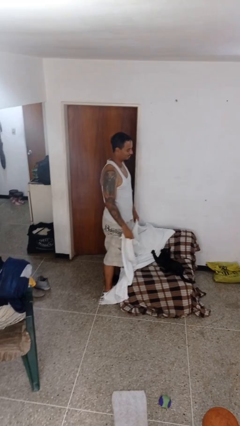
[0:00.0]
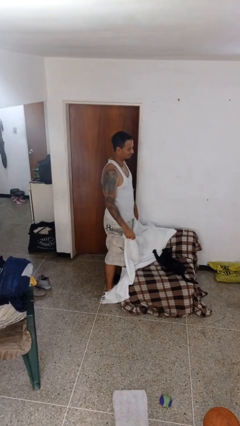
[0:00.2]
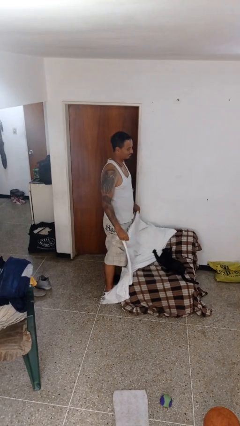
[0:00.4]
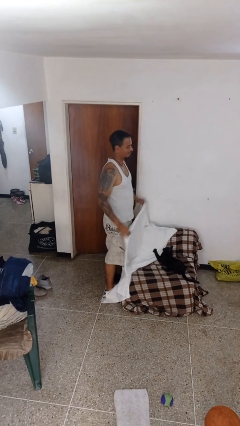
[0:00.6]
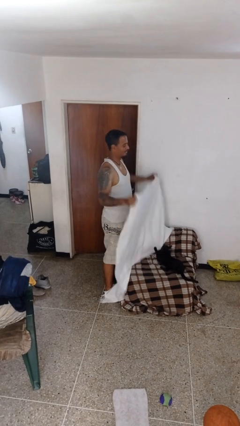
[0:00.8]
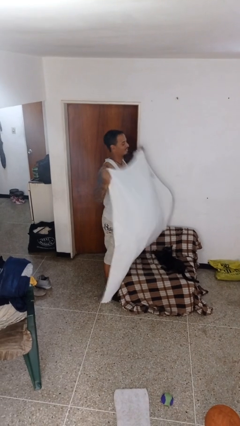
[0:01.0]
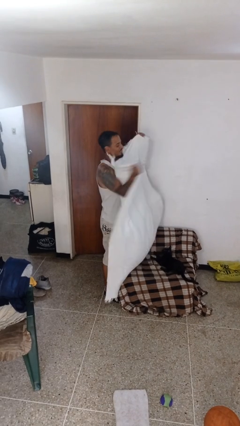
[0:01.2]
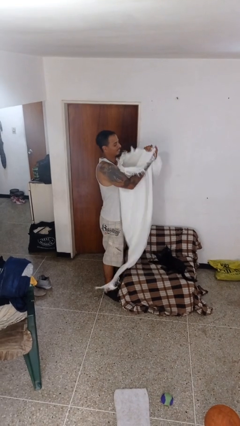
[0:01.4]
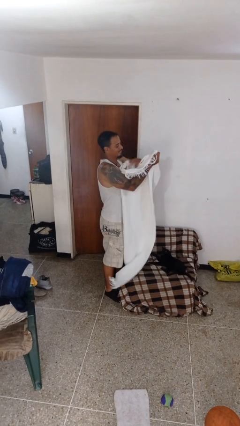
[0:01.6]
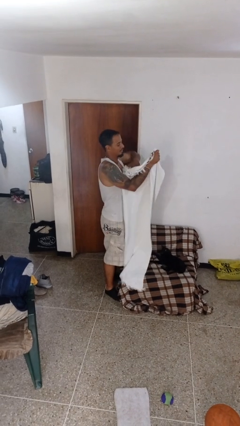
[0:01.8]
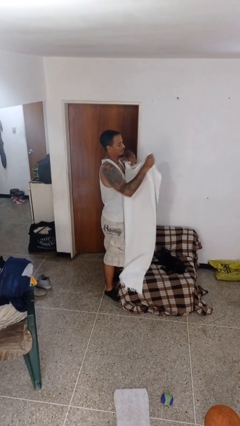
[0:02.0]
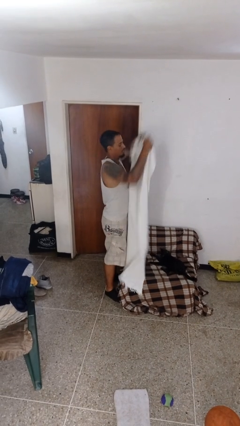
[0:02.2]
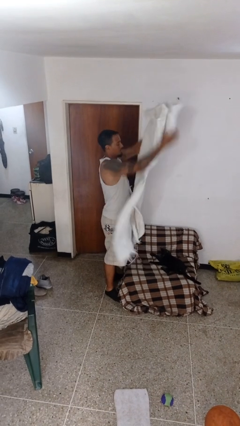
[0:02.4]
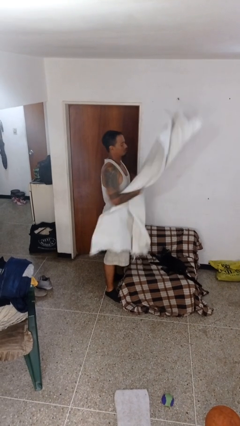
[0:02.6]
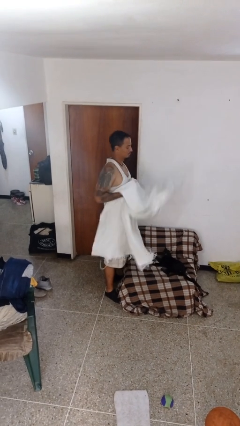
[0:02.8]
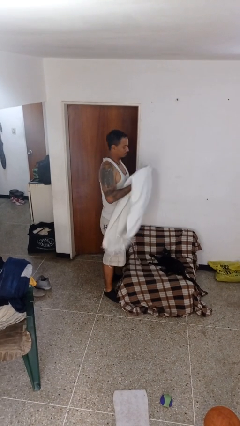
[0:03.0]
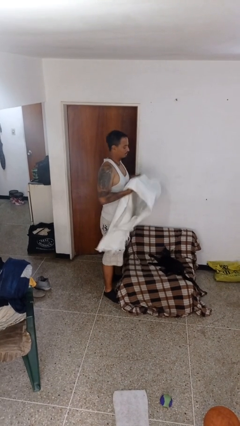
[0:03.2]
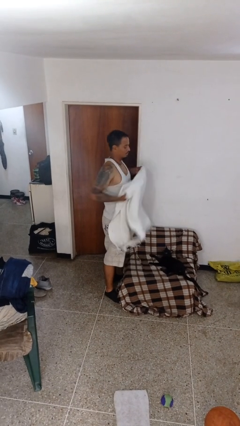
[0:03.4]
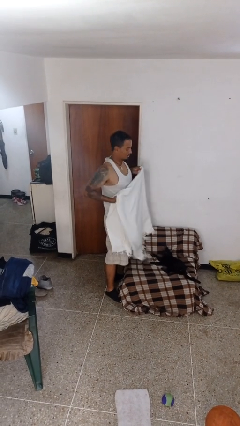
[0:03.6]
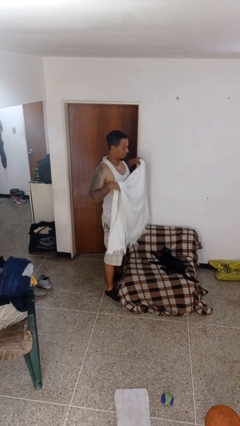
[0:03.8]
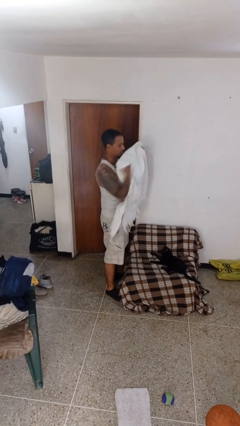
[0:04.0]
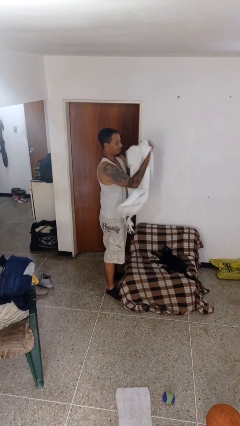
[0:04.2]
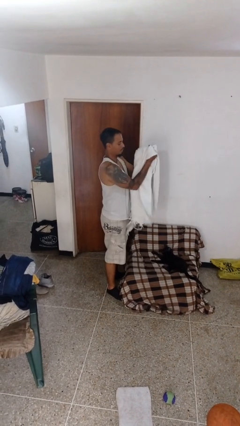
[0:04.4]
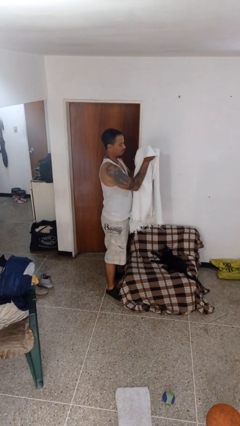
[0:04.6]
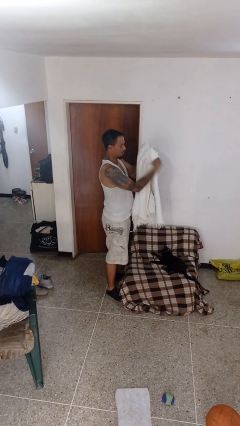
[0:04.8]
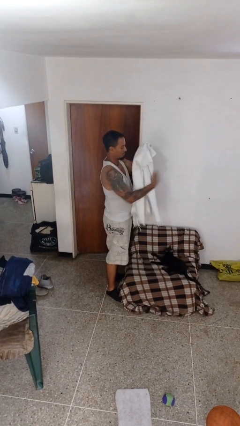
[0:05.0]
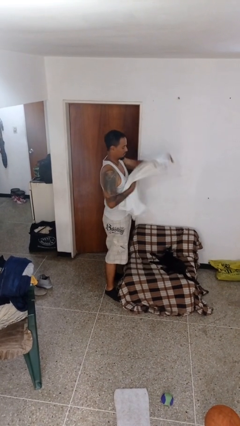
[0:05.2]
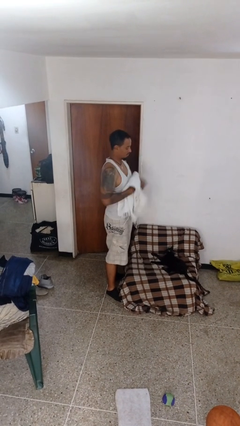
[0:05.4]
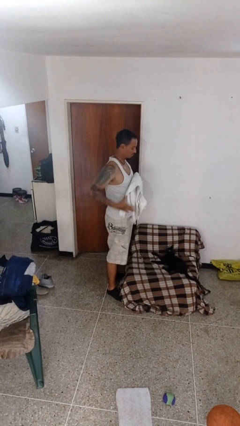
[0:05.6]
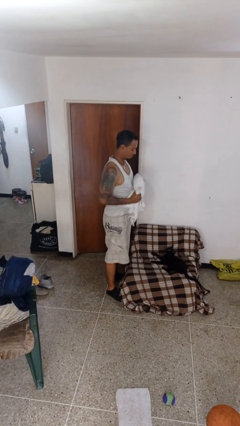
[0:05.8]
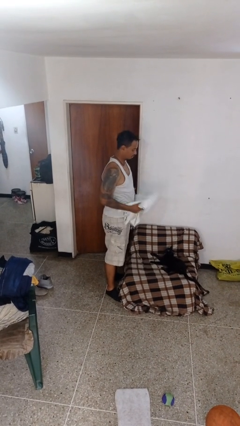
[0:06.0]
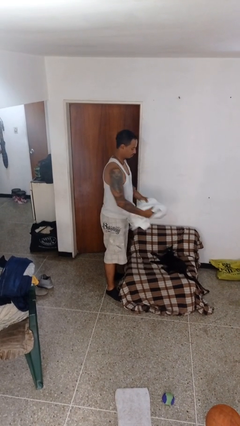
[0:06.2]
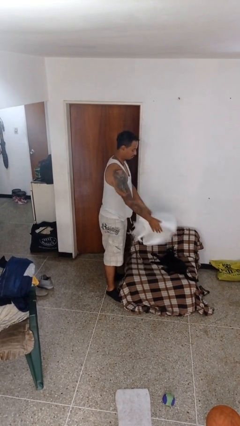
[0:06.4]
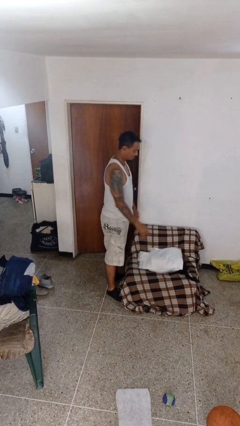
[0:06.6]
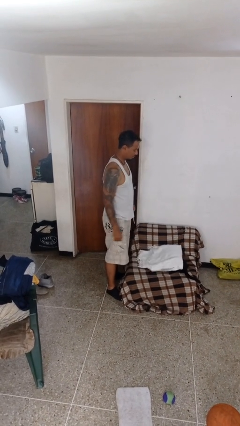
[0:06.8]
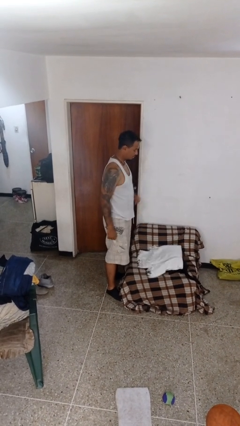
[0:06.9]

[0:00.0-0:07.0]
person folds blanket

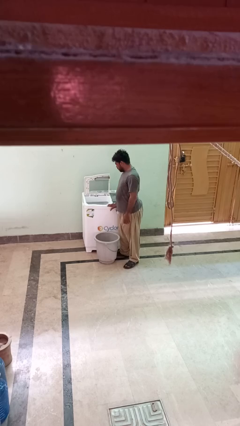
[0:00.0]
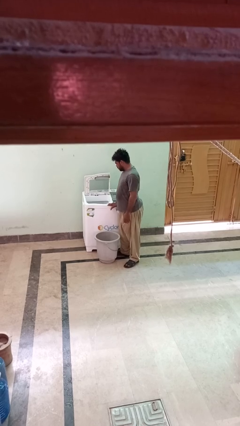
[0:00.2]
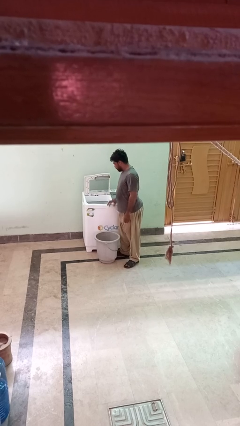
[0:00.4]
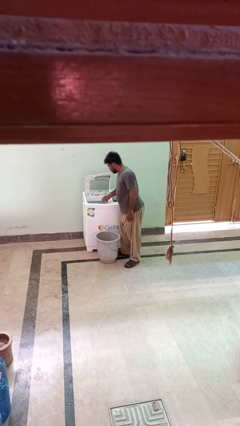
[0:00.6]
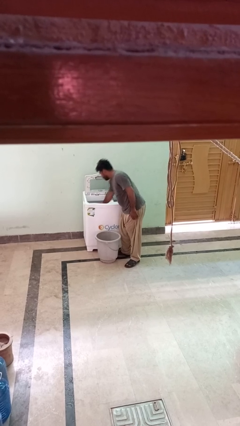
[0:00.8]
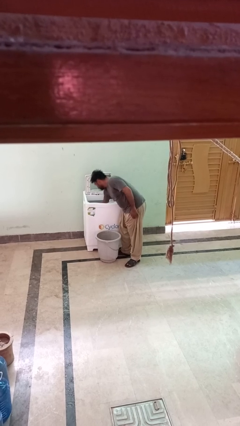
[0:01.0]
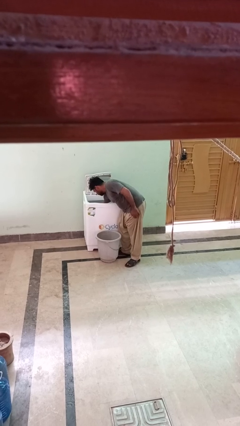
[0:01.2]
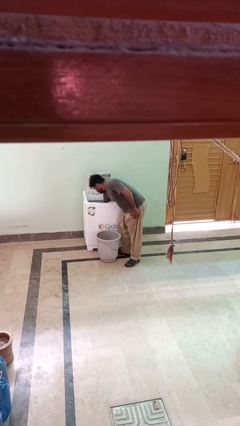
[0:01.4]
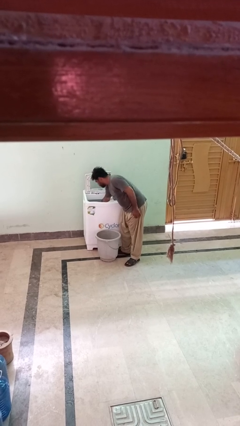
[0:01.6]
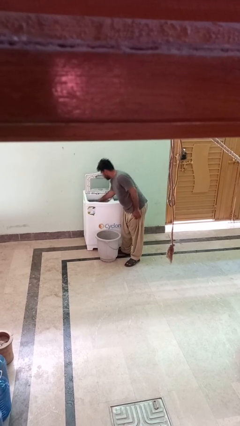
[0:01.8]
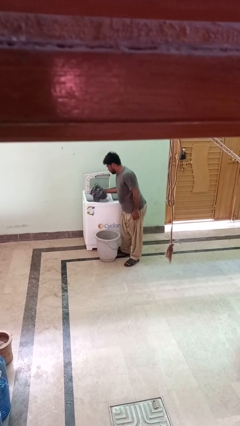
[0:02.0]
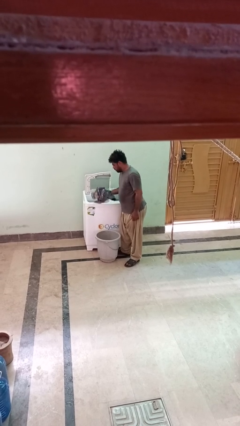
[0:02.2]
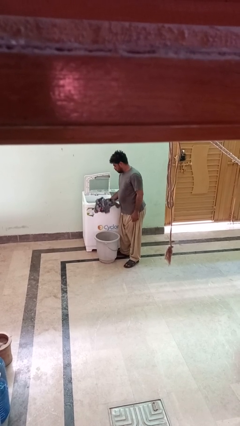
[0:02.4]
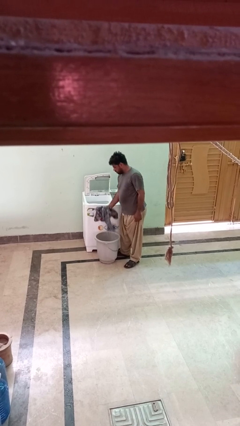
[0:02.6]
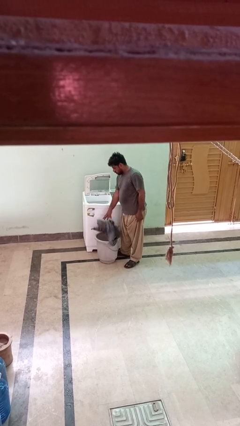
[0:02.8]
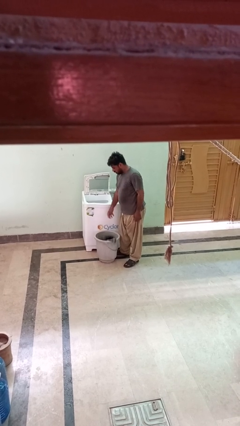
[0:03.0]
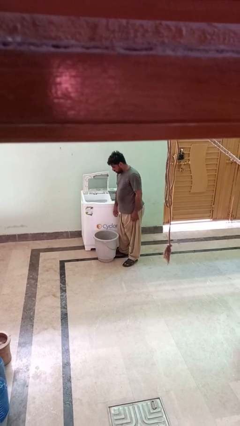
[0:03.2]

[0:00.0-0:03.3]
person loads clotheswasher

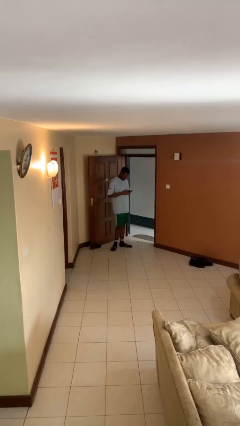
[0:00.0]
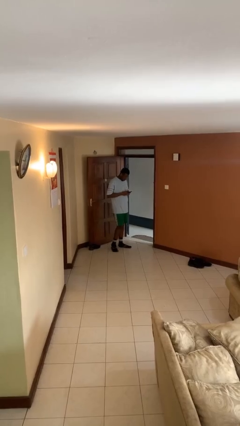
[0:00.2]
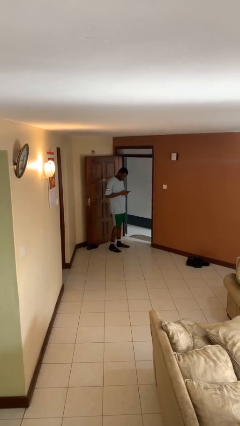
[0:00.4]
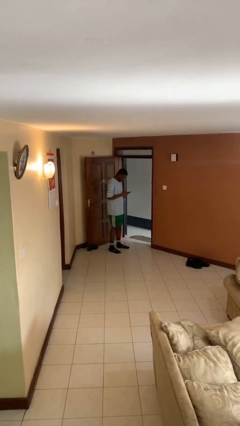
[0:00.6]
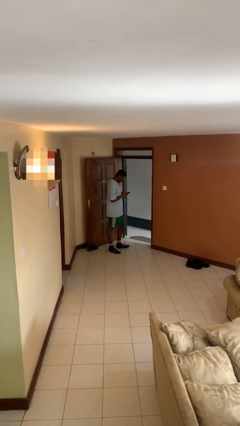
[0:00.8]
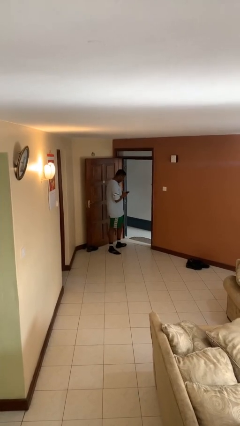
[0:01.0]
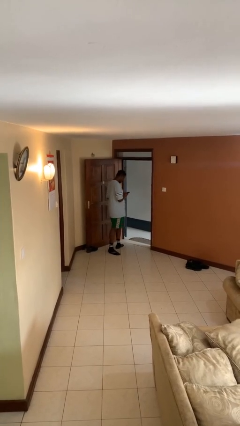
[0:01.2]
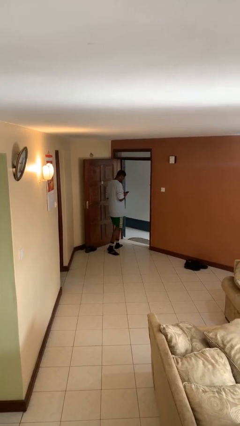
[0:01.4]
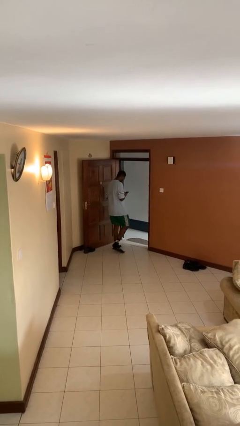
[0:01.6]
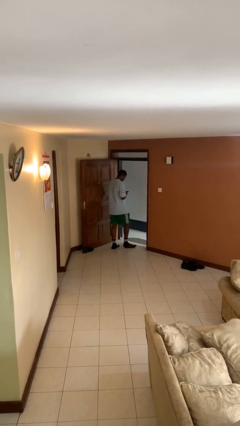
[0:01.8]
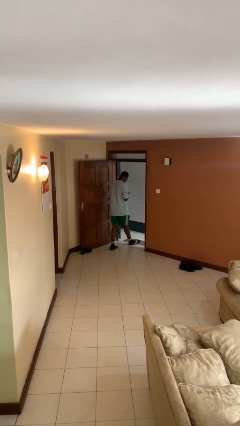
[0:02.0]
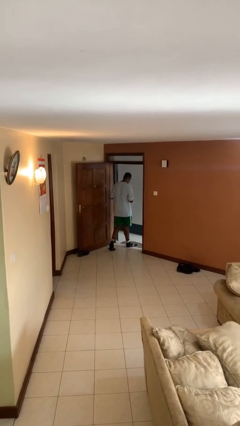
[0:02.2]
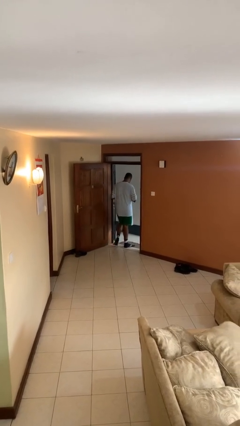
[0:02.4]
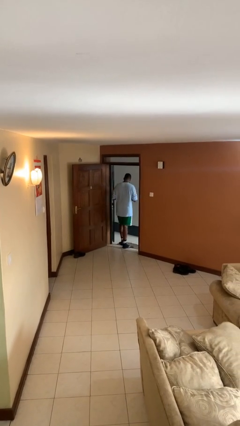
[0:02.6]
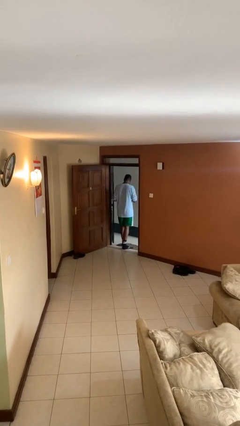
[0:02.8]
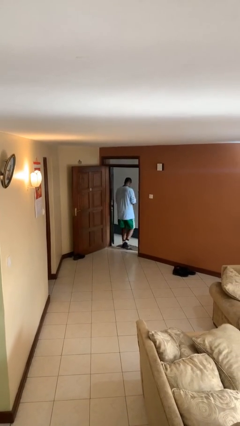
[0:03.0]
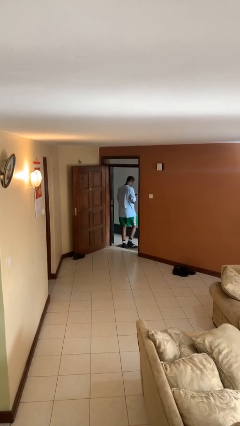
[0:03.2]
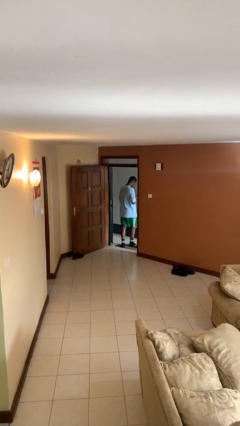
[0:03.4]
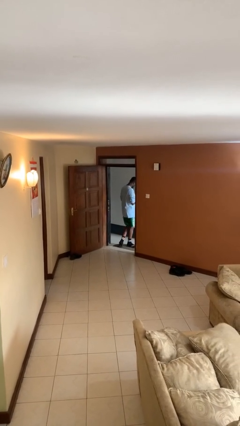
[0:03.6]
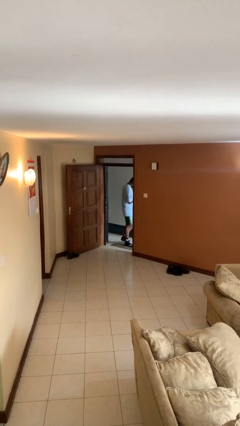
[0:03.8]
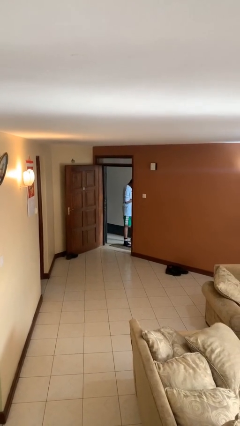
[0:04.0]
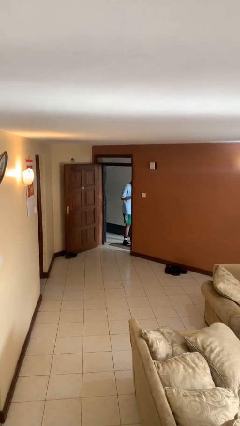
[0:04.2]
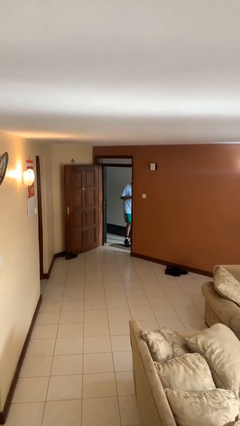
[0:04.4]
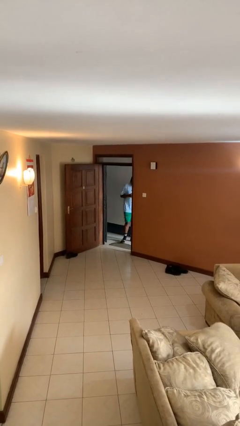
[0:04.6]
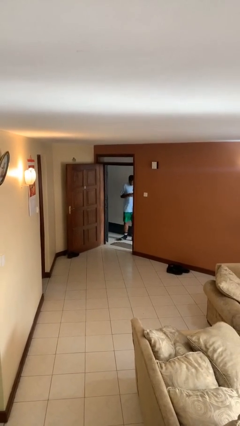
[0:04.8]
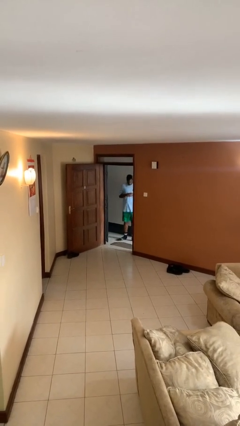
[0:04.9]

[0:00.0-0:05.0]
person exits scene through structure

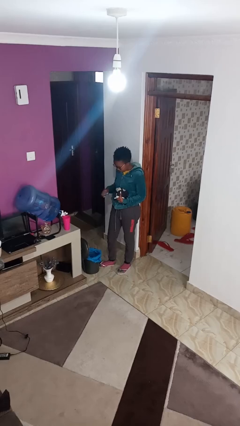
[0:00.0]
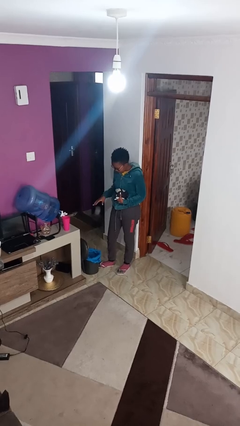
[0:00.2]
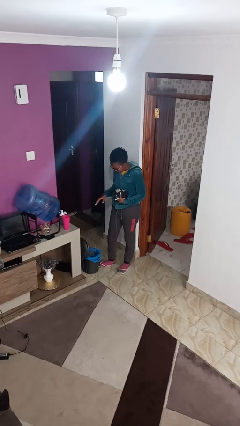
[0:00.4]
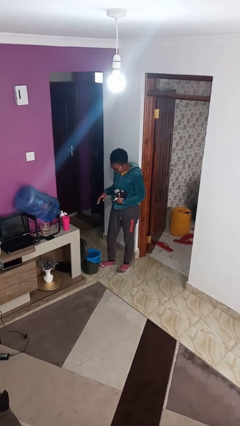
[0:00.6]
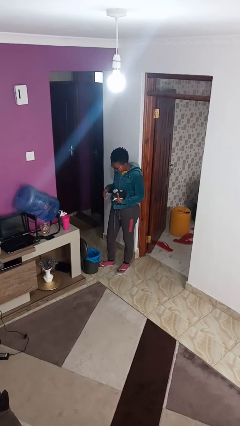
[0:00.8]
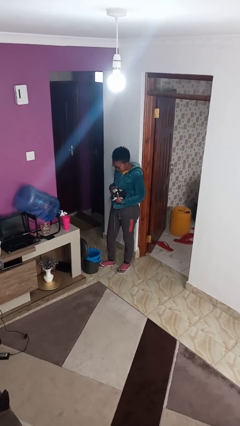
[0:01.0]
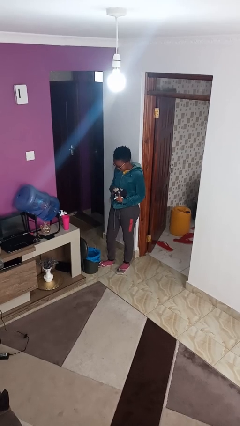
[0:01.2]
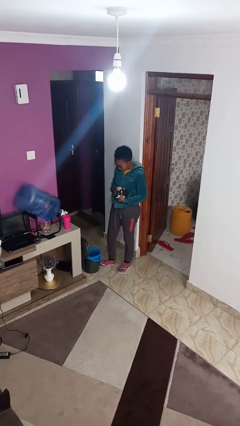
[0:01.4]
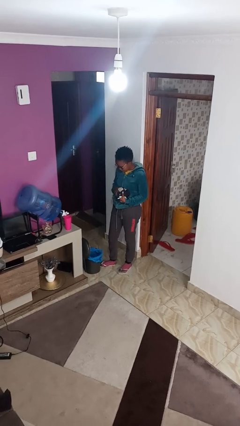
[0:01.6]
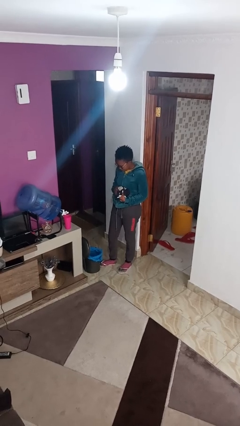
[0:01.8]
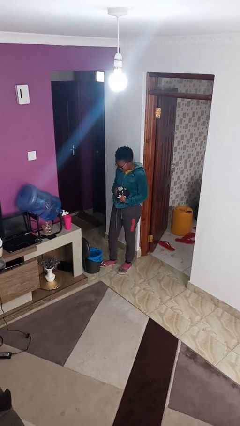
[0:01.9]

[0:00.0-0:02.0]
person discards trash

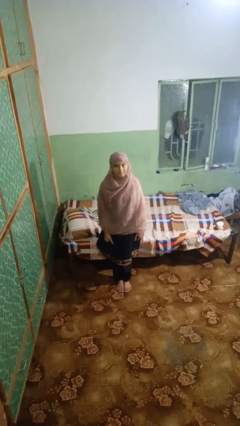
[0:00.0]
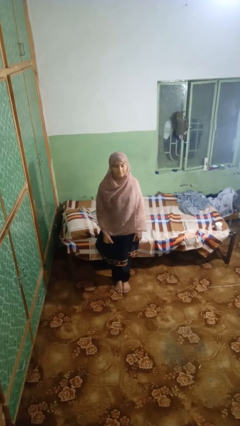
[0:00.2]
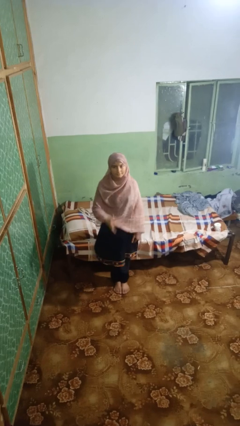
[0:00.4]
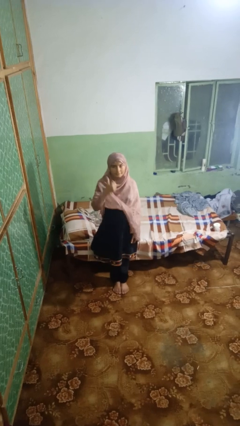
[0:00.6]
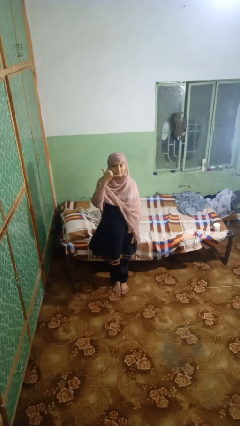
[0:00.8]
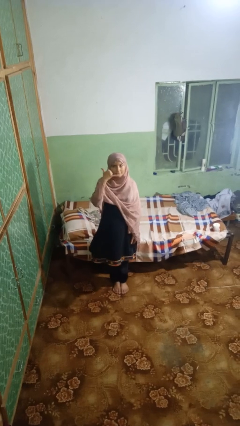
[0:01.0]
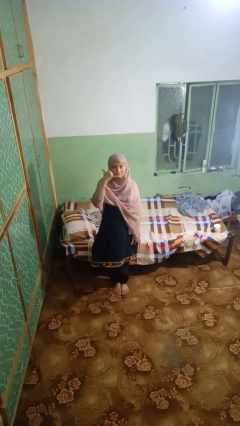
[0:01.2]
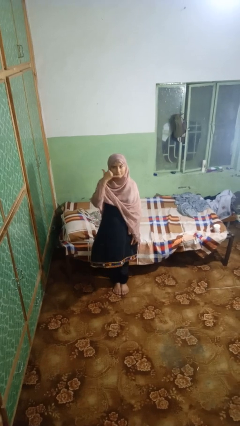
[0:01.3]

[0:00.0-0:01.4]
person gestures call me
